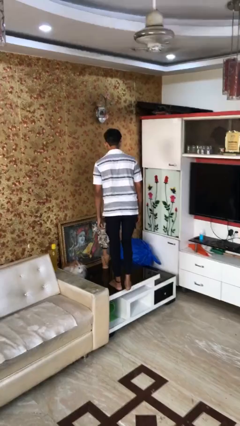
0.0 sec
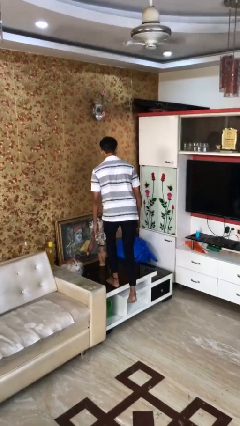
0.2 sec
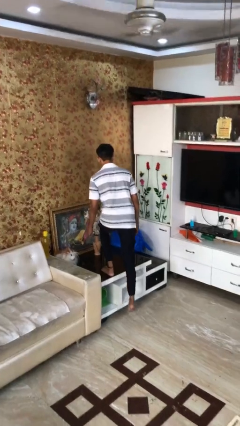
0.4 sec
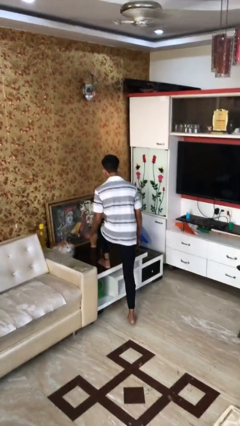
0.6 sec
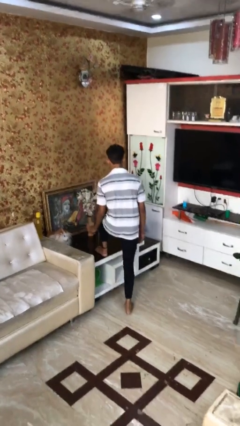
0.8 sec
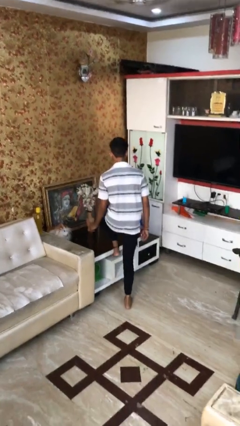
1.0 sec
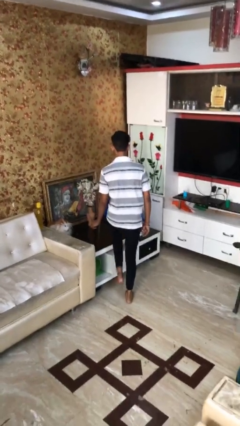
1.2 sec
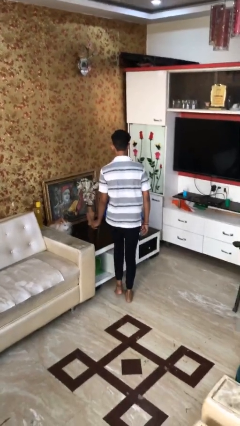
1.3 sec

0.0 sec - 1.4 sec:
person climbs off table

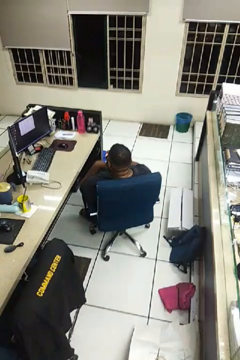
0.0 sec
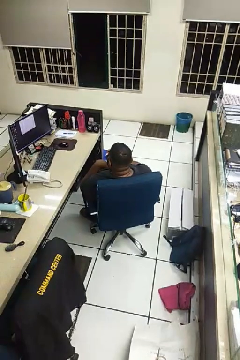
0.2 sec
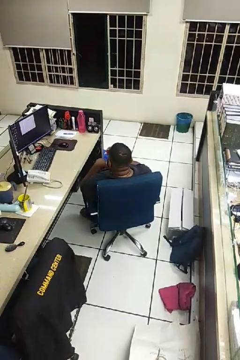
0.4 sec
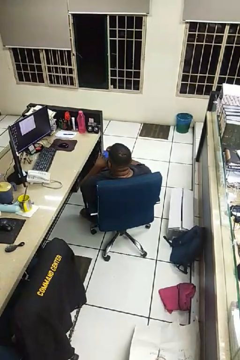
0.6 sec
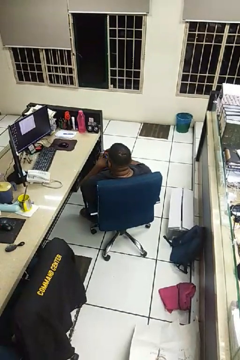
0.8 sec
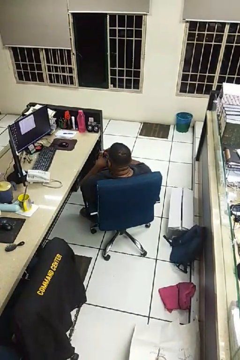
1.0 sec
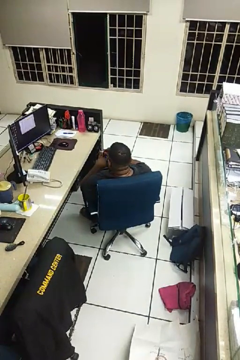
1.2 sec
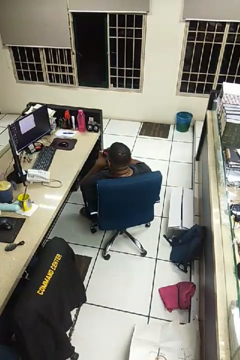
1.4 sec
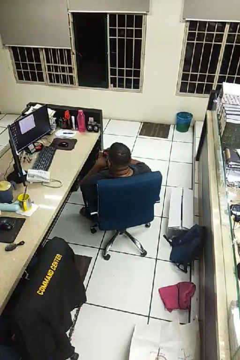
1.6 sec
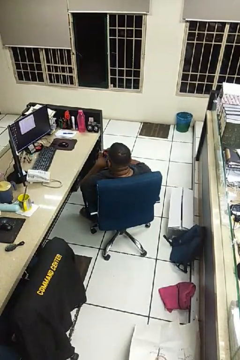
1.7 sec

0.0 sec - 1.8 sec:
person paints fingernails

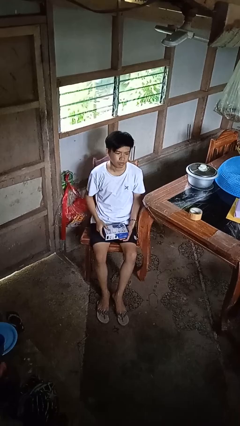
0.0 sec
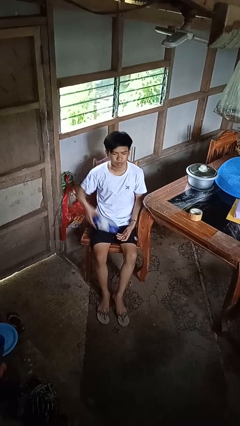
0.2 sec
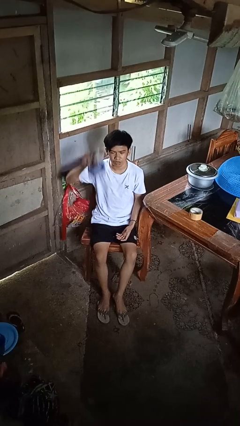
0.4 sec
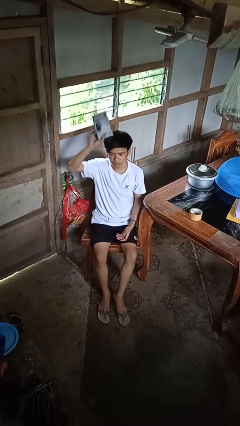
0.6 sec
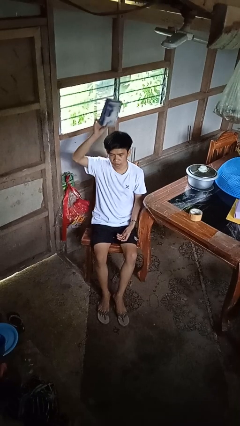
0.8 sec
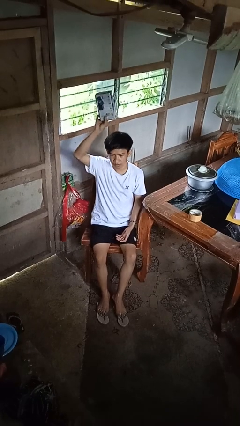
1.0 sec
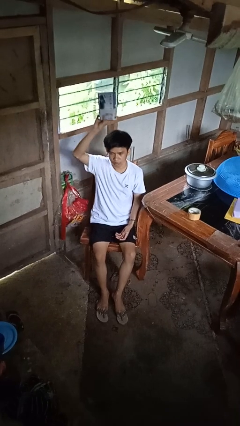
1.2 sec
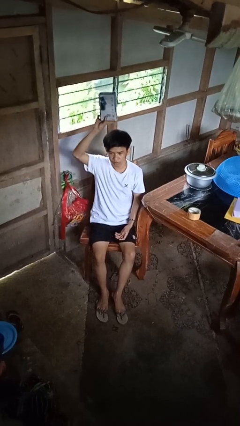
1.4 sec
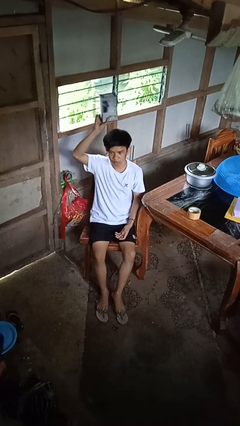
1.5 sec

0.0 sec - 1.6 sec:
person holds object above head

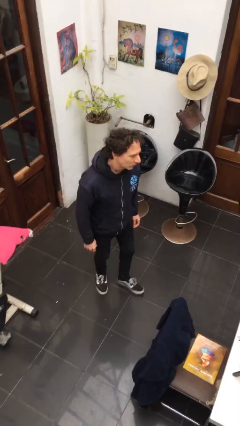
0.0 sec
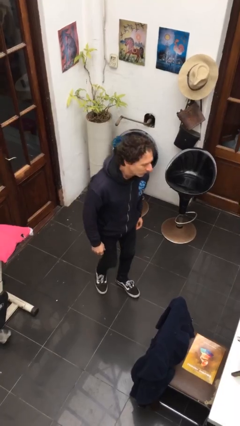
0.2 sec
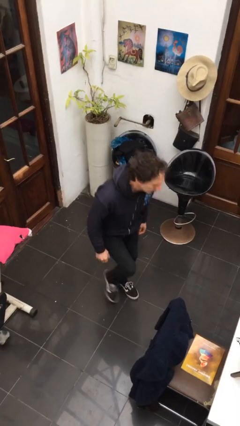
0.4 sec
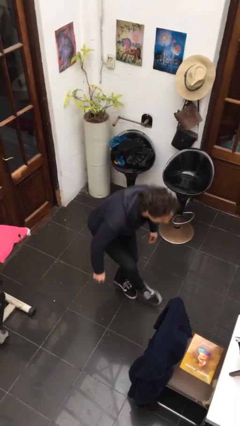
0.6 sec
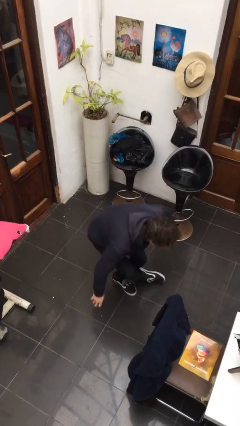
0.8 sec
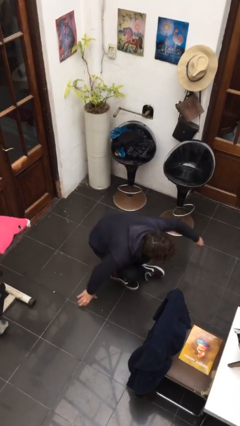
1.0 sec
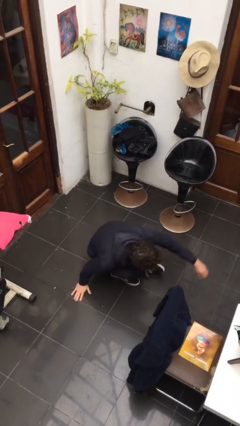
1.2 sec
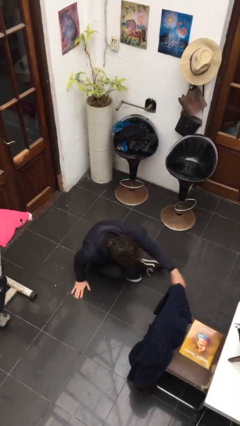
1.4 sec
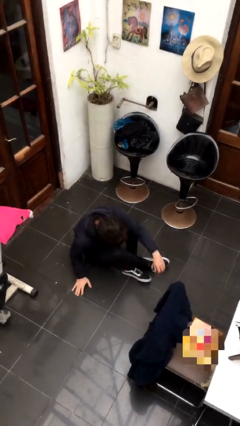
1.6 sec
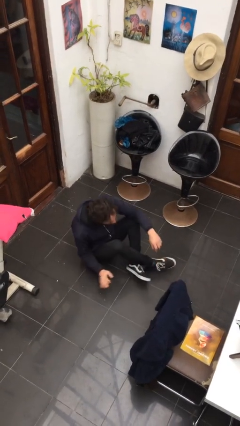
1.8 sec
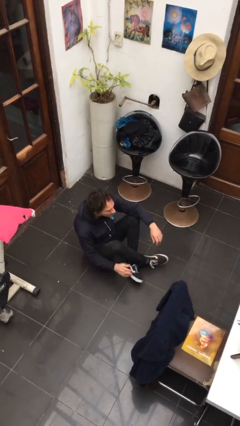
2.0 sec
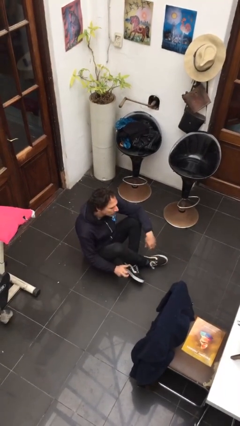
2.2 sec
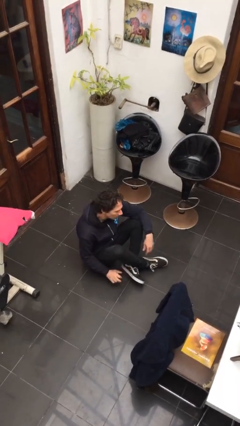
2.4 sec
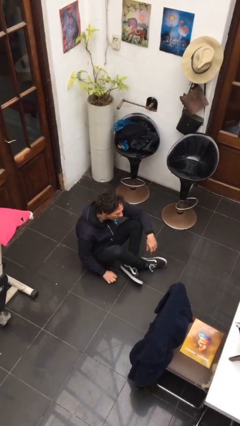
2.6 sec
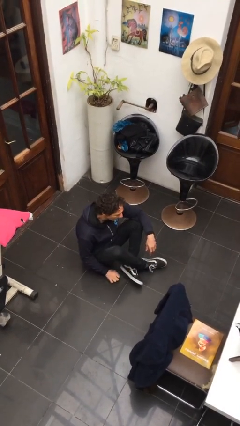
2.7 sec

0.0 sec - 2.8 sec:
person sits crisscross

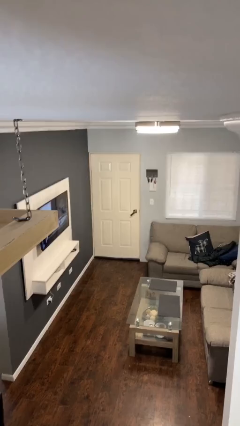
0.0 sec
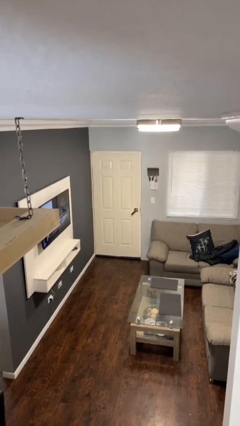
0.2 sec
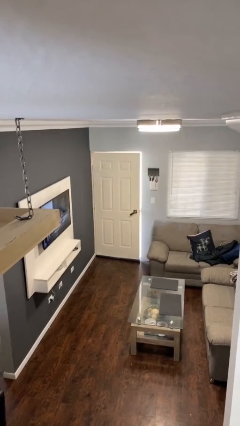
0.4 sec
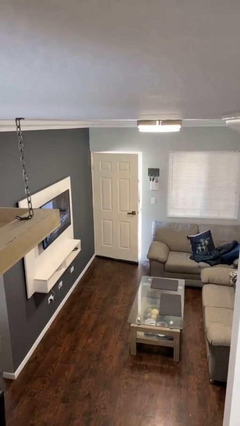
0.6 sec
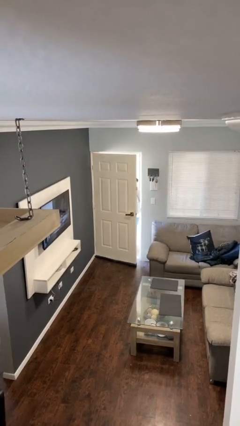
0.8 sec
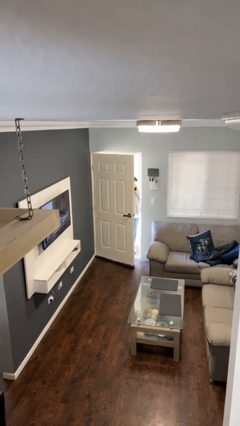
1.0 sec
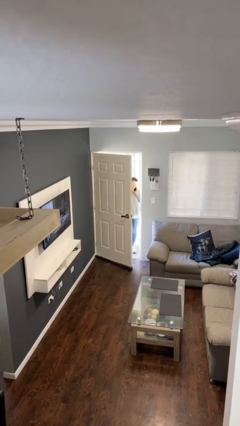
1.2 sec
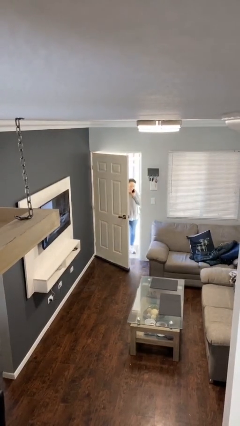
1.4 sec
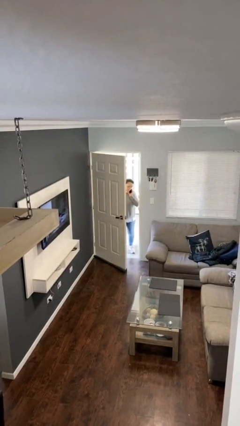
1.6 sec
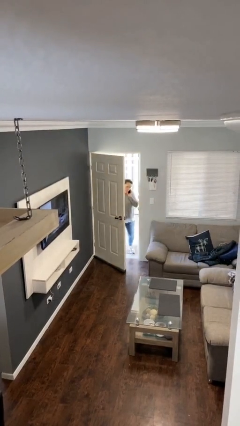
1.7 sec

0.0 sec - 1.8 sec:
person opens facility door

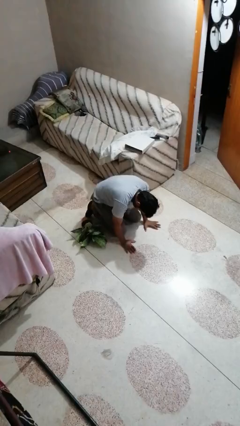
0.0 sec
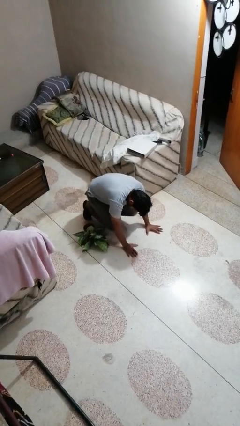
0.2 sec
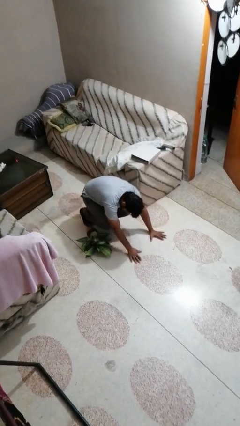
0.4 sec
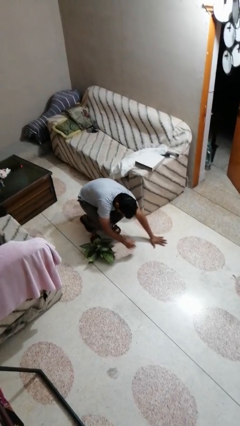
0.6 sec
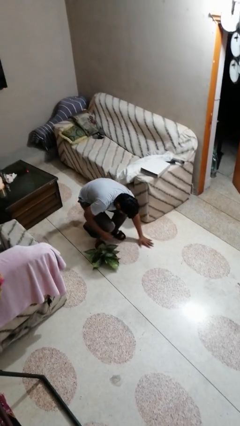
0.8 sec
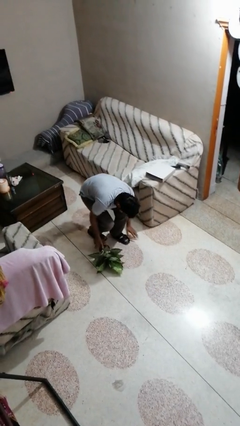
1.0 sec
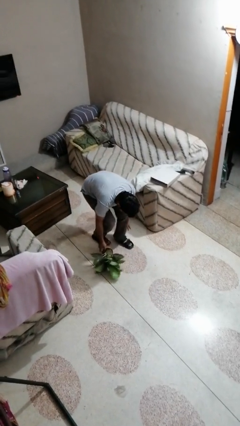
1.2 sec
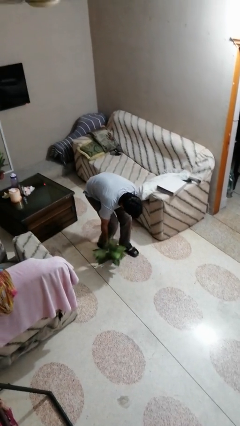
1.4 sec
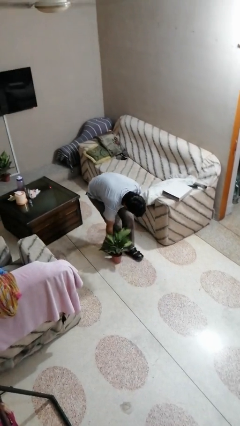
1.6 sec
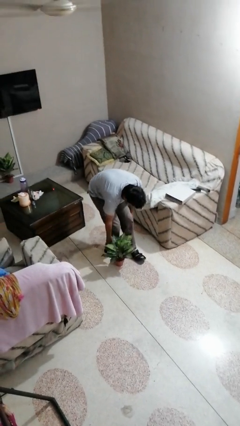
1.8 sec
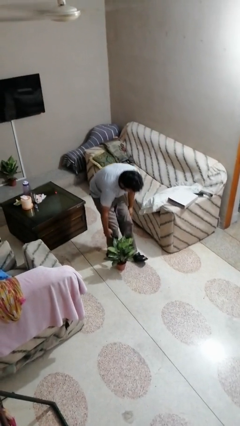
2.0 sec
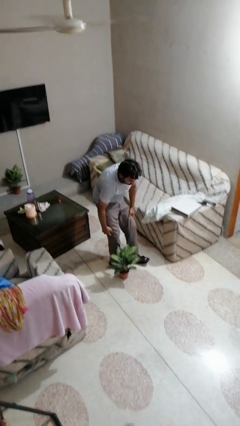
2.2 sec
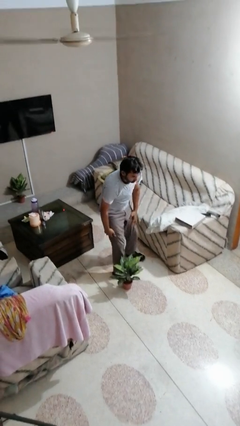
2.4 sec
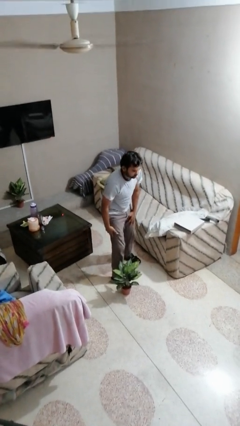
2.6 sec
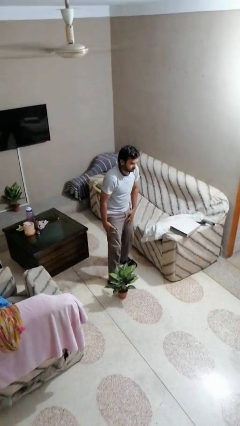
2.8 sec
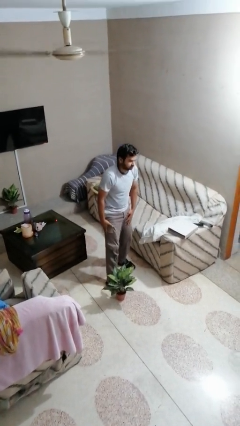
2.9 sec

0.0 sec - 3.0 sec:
person stands up from floor

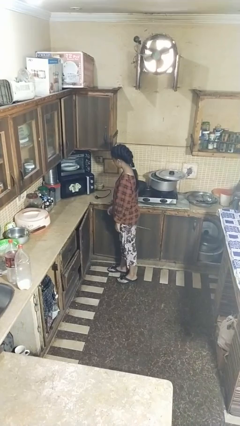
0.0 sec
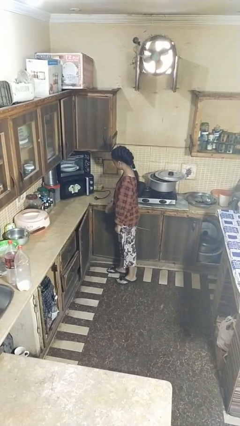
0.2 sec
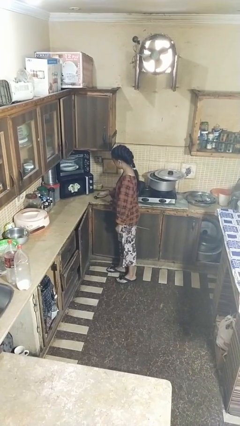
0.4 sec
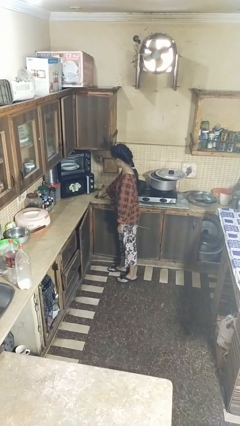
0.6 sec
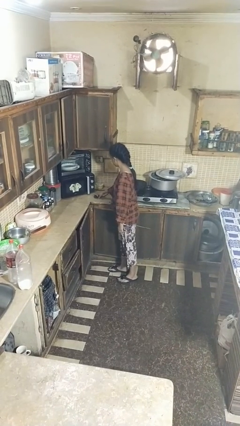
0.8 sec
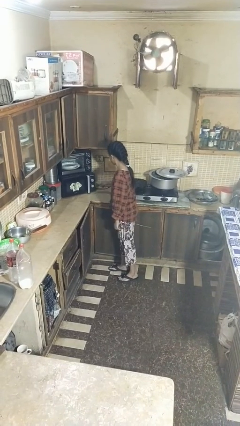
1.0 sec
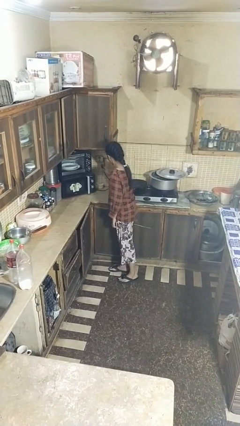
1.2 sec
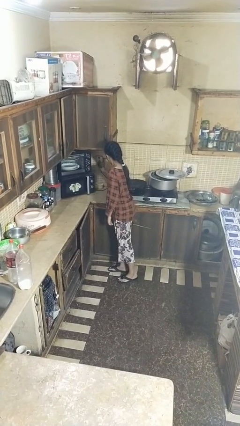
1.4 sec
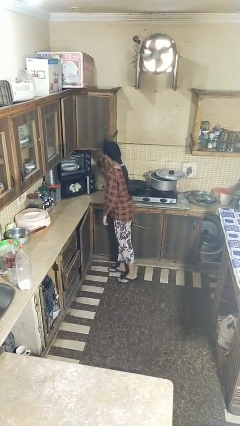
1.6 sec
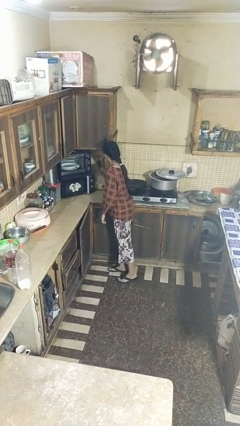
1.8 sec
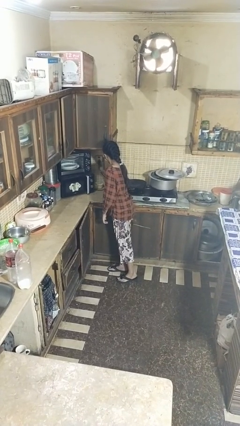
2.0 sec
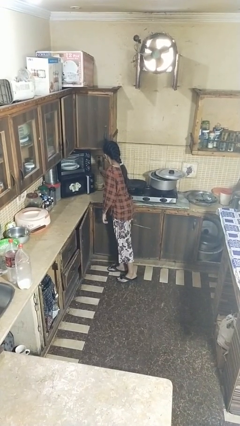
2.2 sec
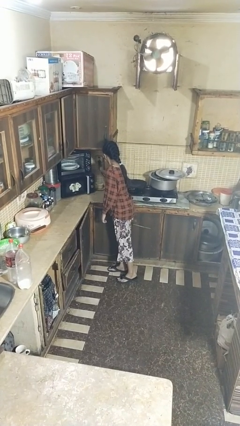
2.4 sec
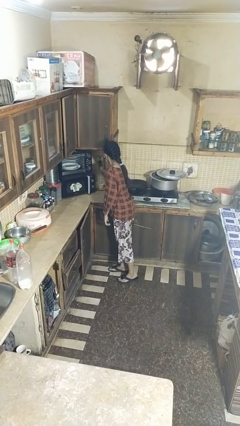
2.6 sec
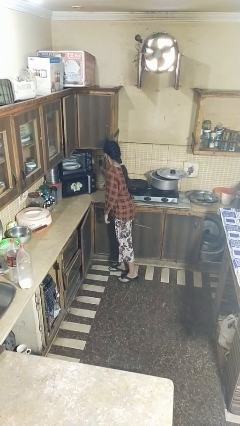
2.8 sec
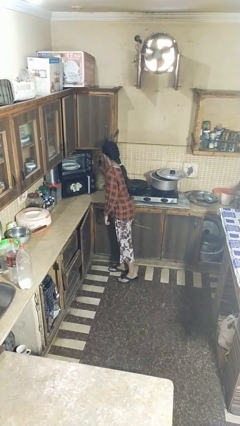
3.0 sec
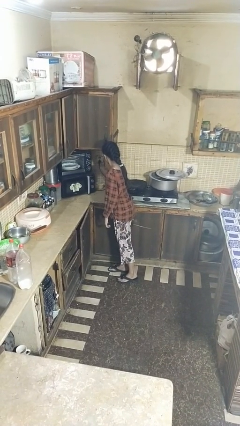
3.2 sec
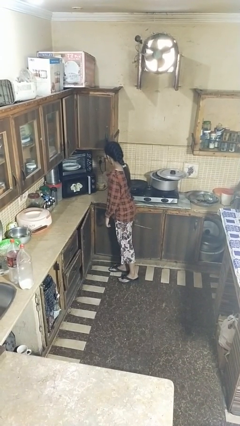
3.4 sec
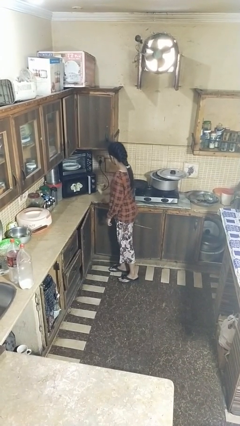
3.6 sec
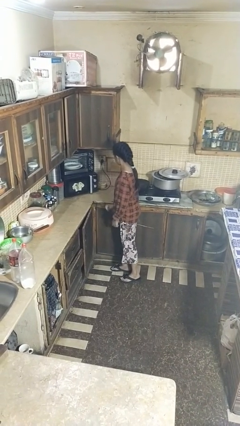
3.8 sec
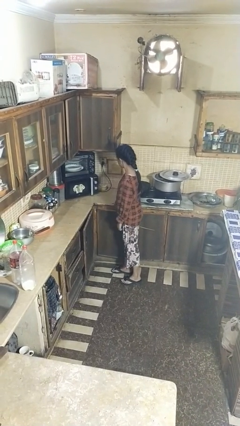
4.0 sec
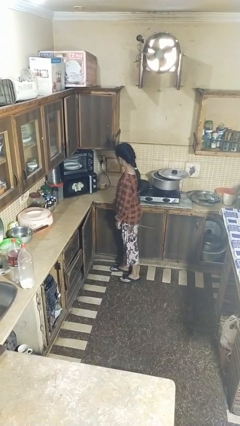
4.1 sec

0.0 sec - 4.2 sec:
person plugs into electrical socket

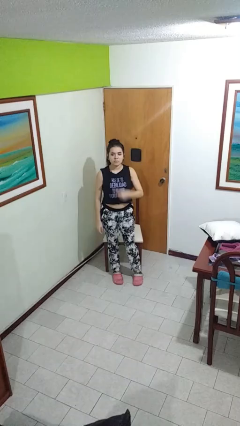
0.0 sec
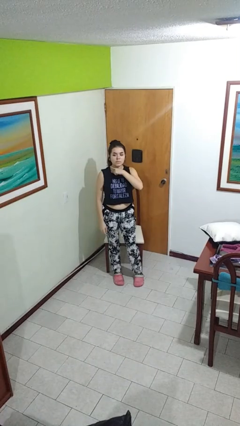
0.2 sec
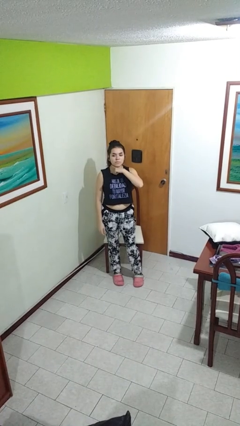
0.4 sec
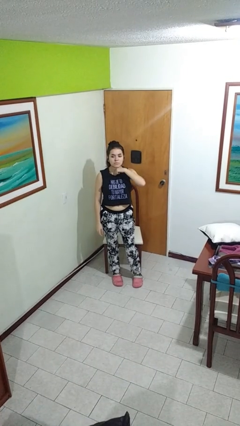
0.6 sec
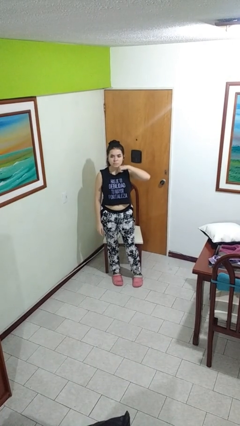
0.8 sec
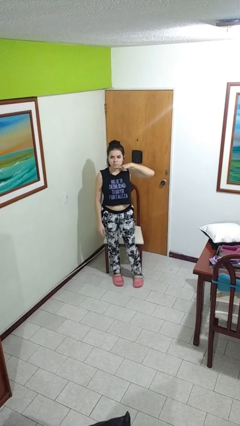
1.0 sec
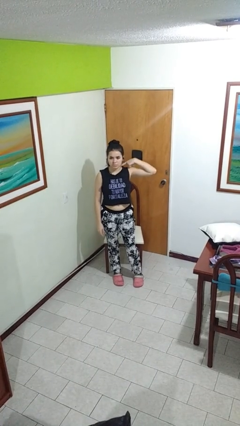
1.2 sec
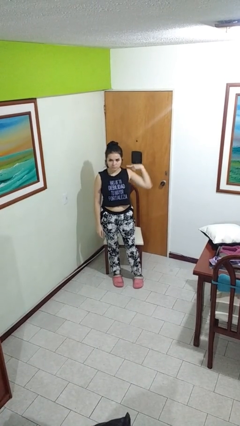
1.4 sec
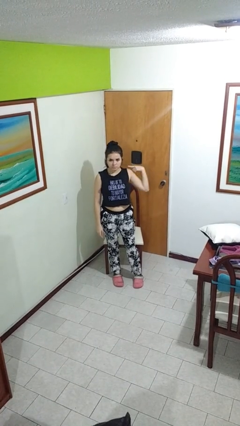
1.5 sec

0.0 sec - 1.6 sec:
person gestures cut
